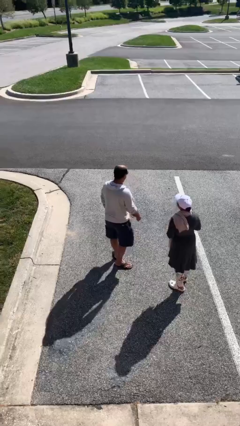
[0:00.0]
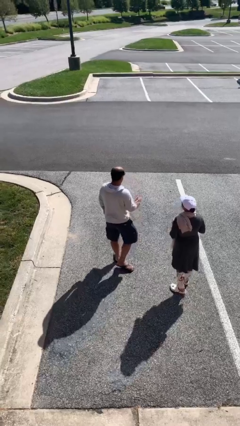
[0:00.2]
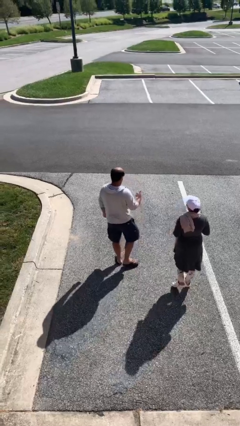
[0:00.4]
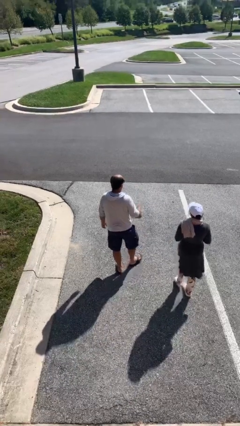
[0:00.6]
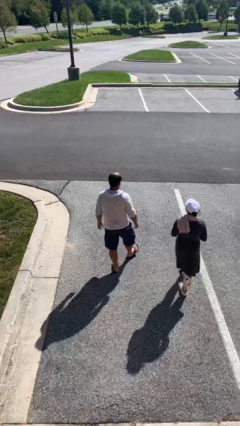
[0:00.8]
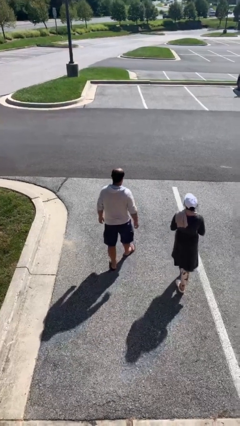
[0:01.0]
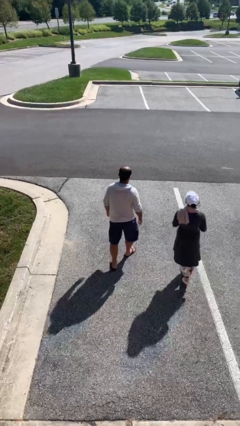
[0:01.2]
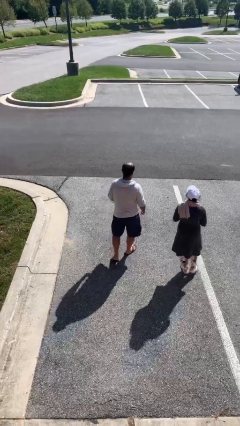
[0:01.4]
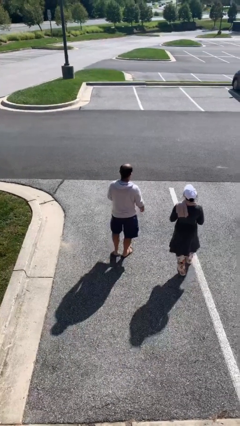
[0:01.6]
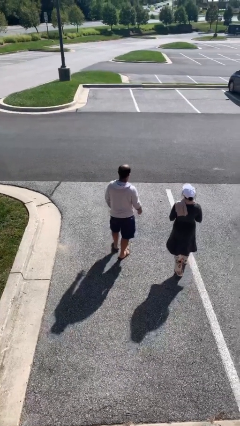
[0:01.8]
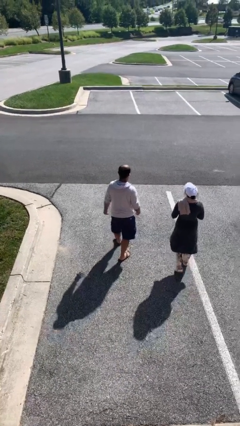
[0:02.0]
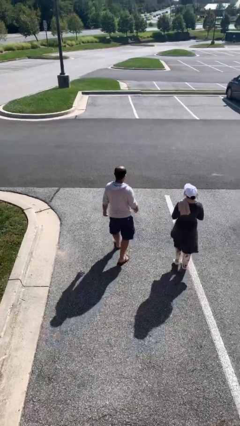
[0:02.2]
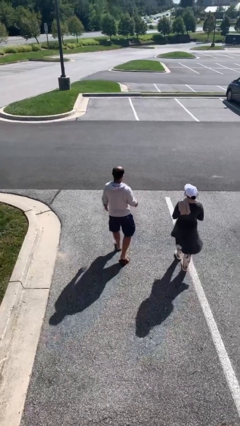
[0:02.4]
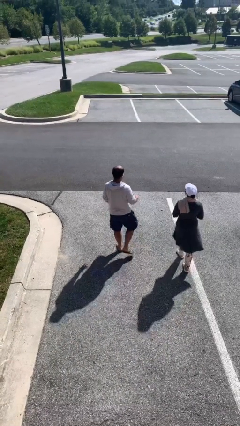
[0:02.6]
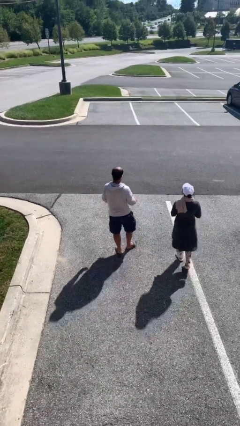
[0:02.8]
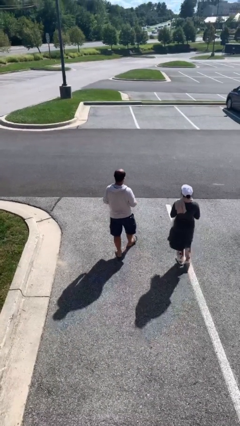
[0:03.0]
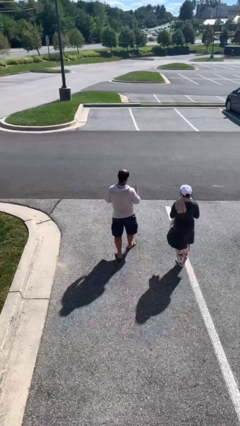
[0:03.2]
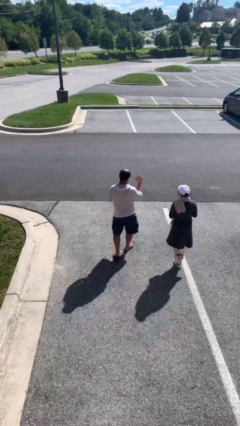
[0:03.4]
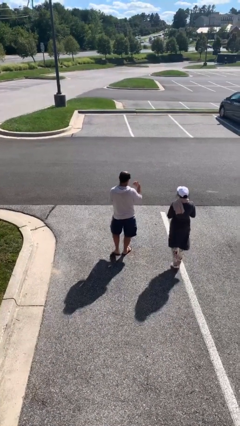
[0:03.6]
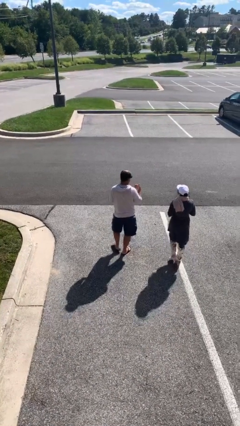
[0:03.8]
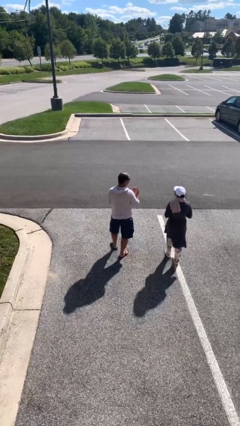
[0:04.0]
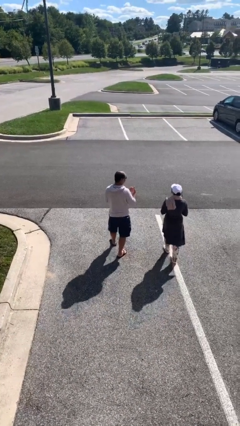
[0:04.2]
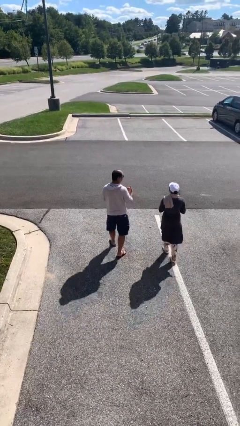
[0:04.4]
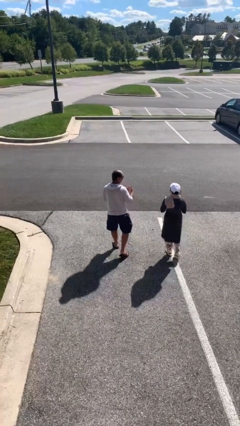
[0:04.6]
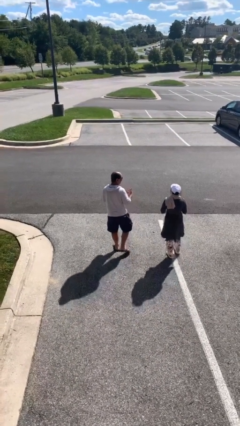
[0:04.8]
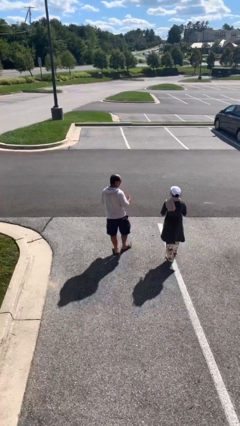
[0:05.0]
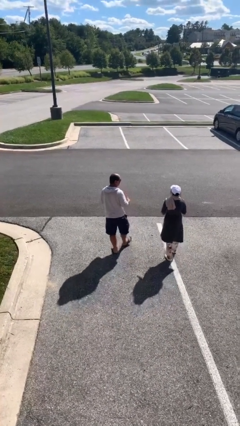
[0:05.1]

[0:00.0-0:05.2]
person talks to person

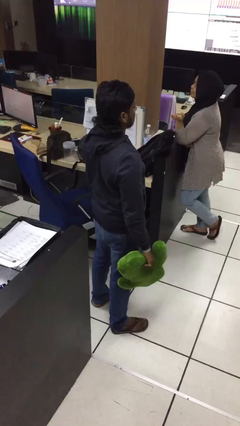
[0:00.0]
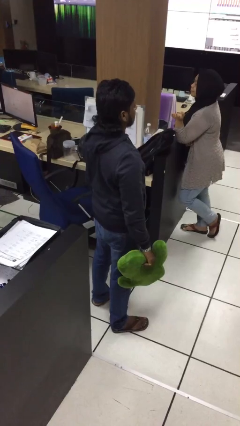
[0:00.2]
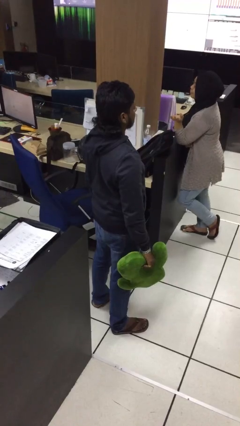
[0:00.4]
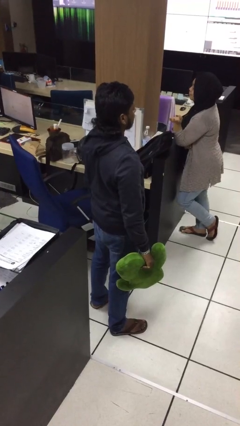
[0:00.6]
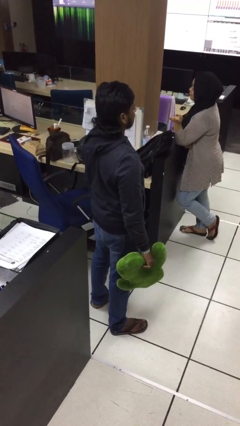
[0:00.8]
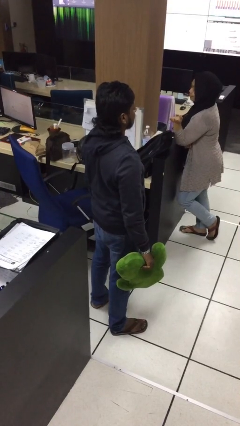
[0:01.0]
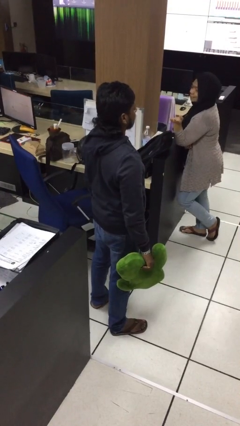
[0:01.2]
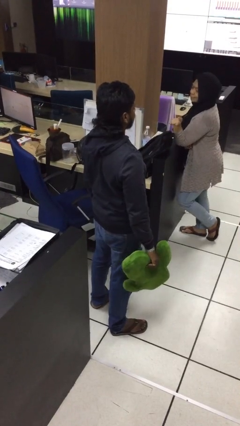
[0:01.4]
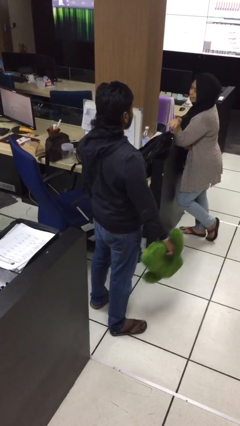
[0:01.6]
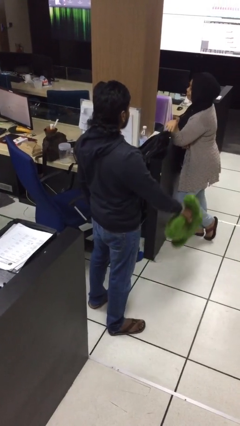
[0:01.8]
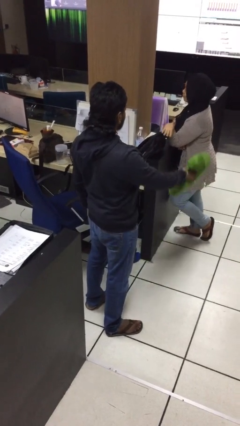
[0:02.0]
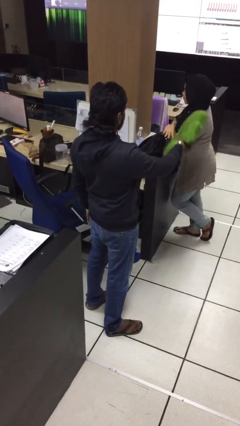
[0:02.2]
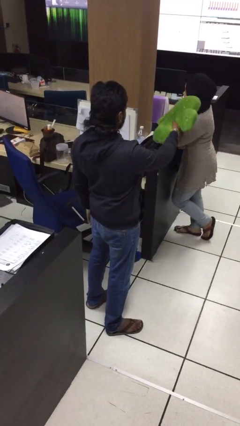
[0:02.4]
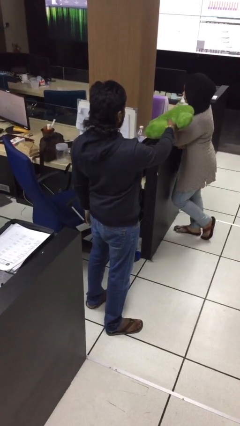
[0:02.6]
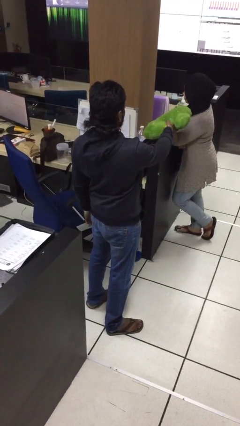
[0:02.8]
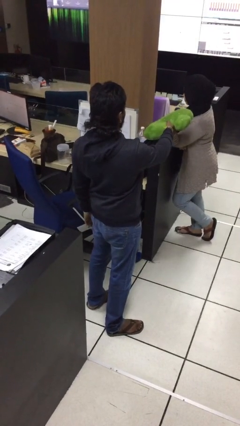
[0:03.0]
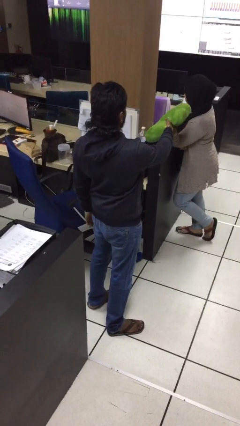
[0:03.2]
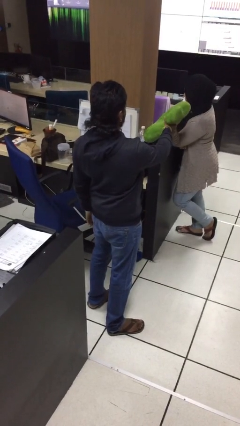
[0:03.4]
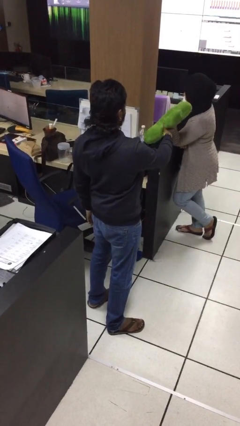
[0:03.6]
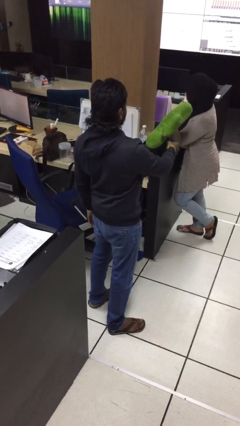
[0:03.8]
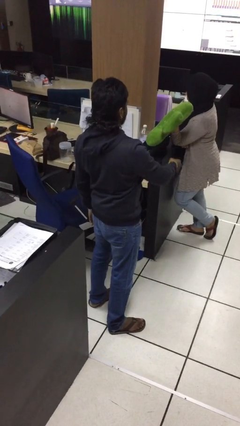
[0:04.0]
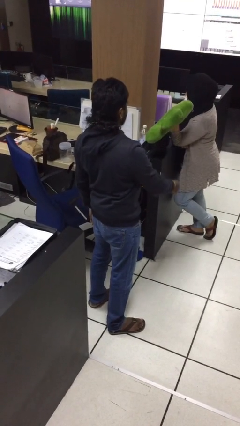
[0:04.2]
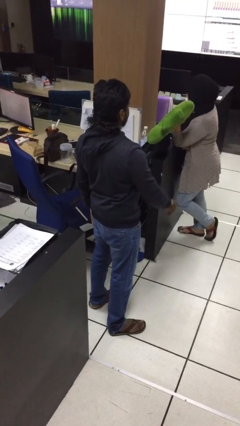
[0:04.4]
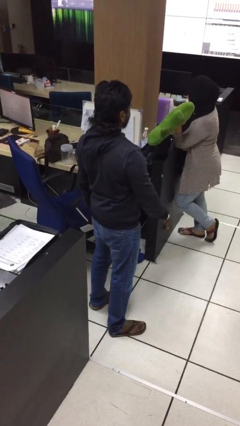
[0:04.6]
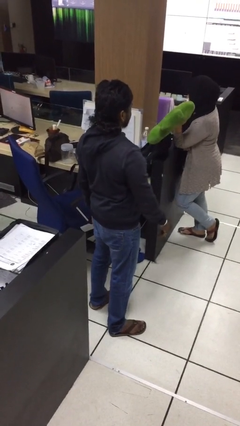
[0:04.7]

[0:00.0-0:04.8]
person transfers object to person

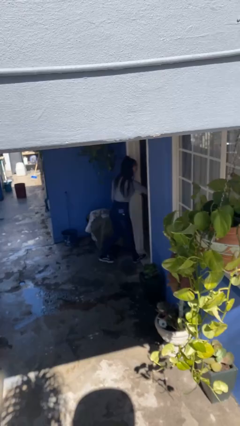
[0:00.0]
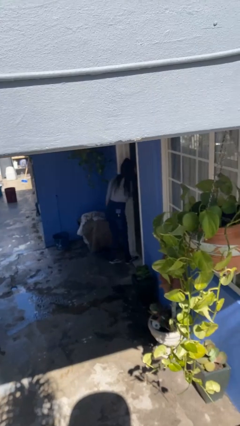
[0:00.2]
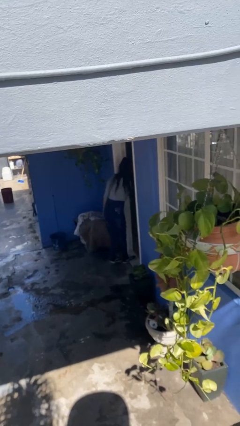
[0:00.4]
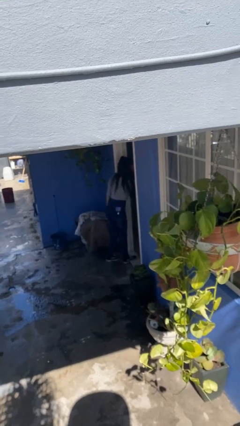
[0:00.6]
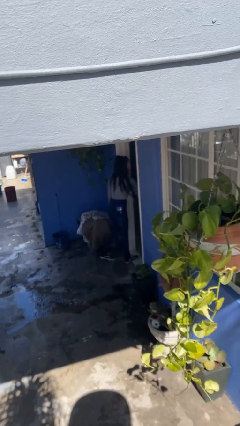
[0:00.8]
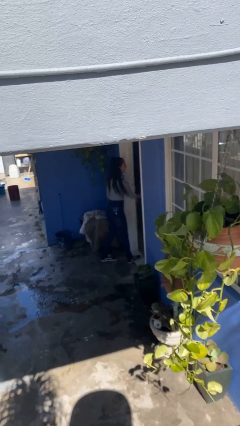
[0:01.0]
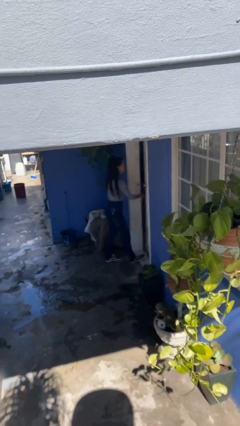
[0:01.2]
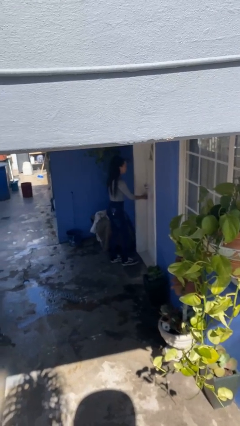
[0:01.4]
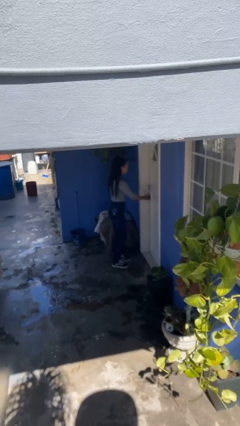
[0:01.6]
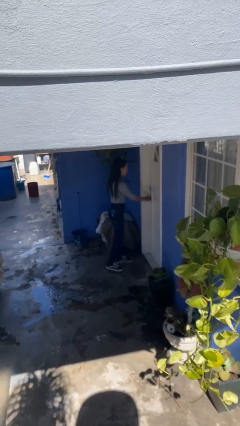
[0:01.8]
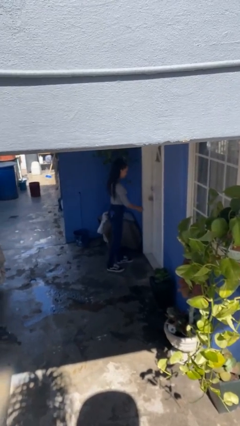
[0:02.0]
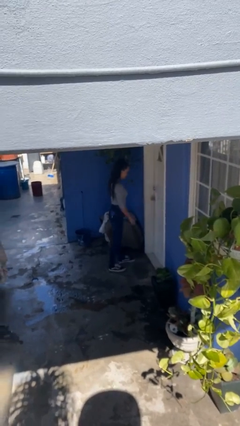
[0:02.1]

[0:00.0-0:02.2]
person closes facility door

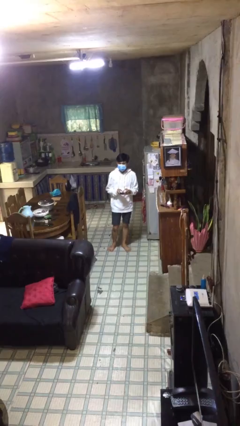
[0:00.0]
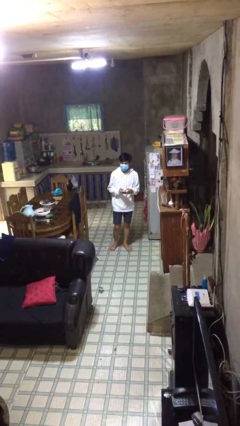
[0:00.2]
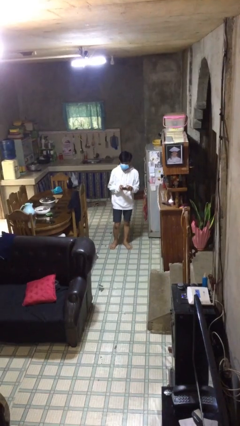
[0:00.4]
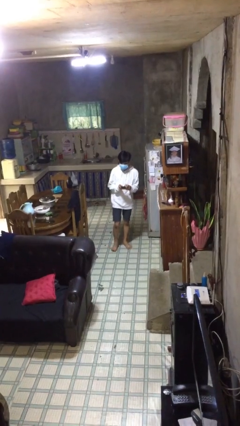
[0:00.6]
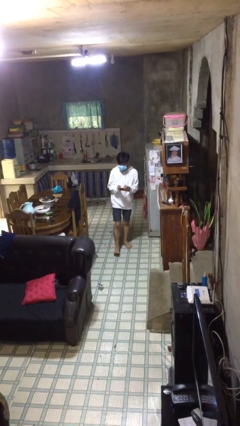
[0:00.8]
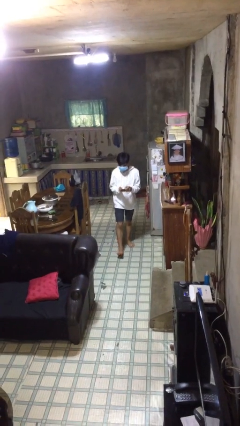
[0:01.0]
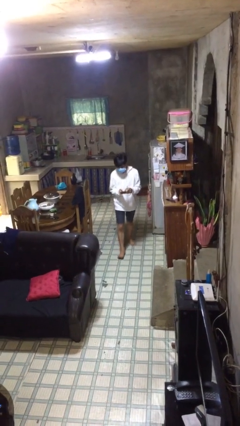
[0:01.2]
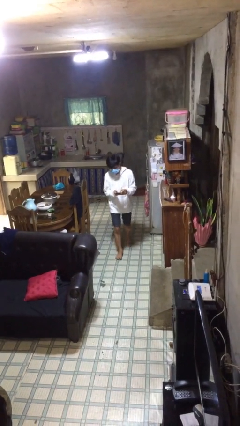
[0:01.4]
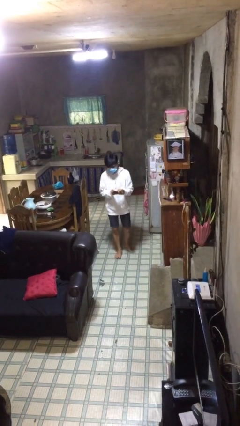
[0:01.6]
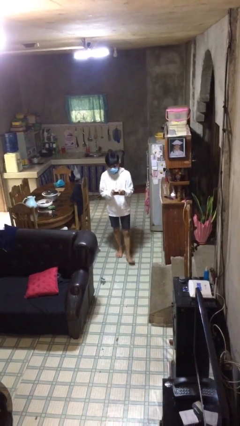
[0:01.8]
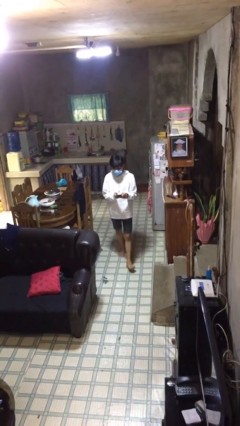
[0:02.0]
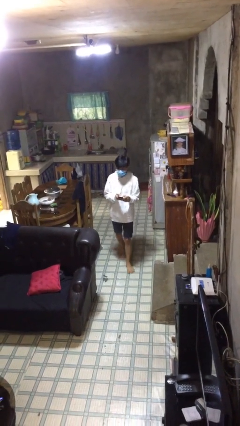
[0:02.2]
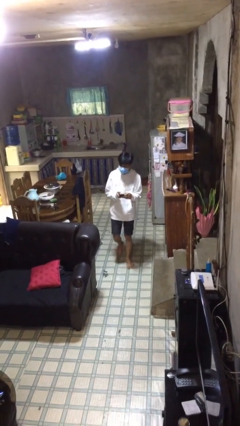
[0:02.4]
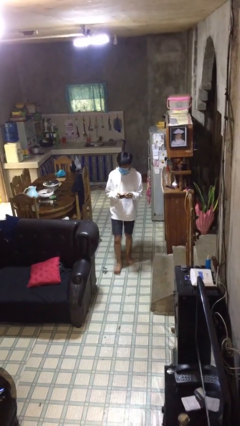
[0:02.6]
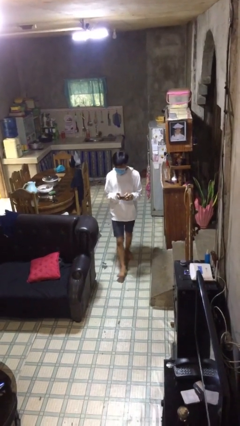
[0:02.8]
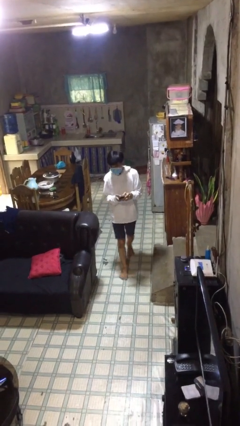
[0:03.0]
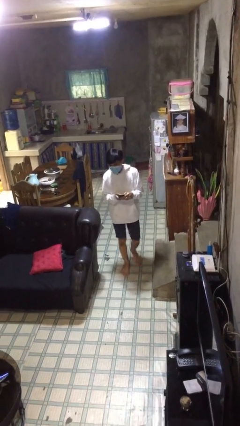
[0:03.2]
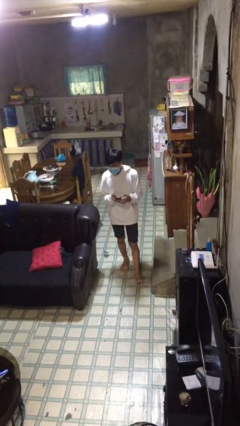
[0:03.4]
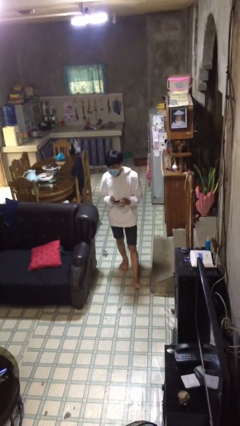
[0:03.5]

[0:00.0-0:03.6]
person texts on phone

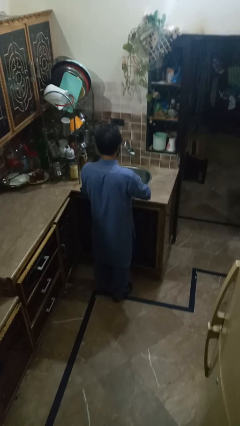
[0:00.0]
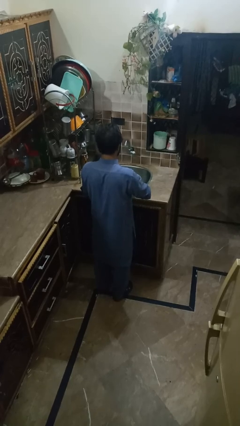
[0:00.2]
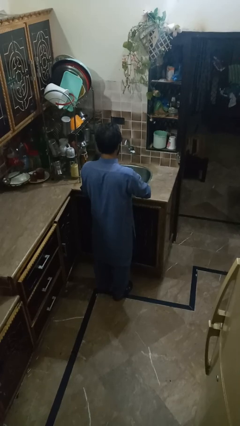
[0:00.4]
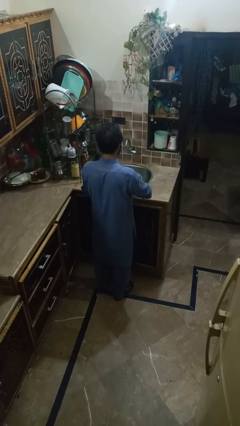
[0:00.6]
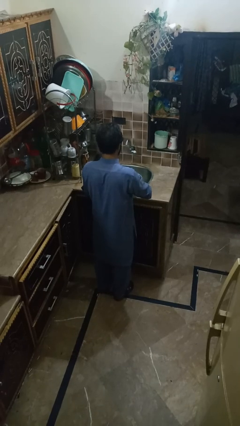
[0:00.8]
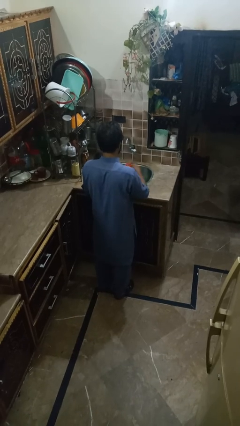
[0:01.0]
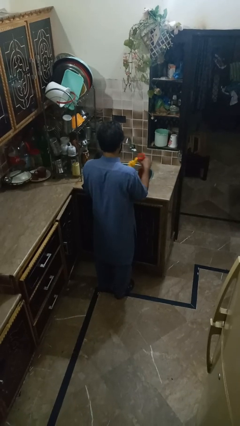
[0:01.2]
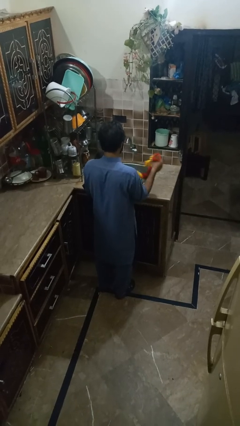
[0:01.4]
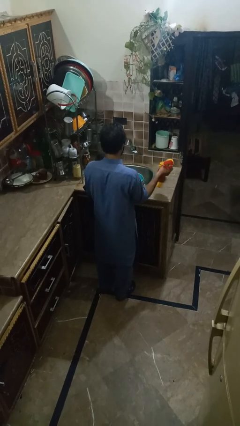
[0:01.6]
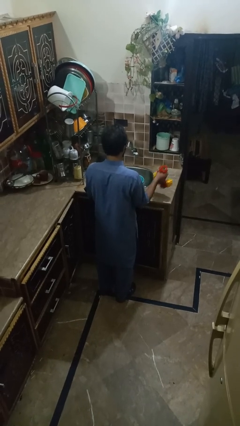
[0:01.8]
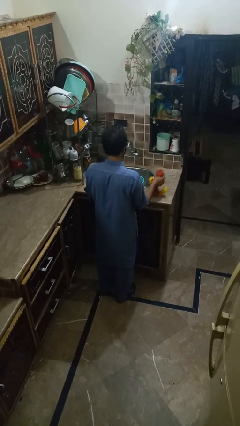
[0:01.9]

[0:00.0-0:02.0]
person pours into bowl

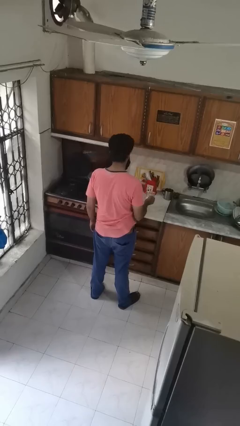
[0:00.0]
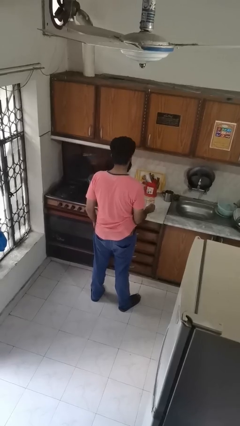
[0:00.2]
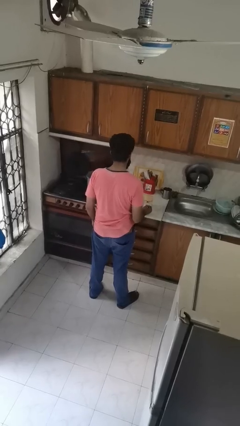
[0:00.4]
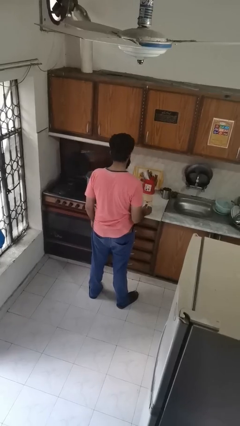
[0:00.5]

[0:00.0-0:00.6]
person puts down object on shelf
